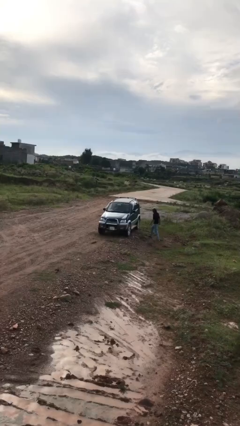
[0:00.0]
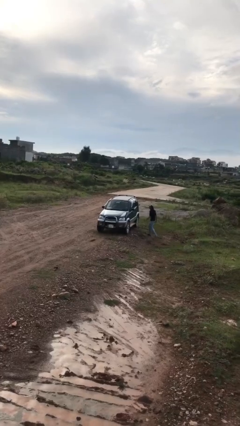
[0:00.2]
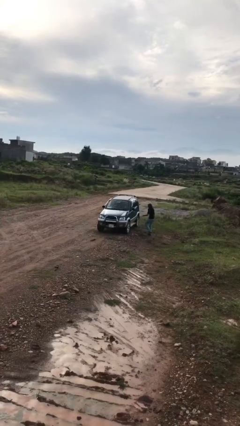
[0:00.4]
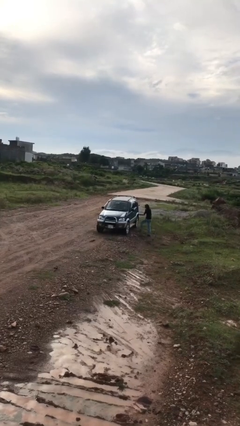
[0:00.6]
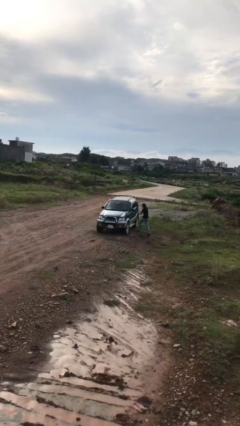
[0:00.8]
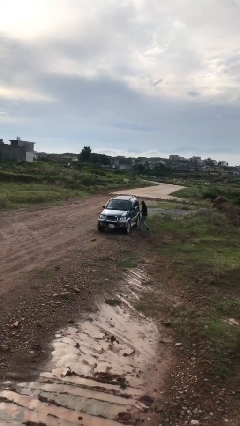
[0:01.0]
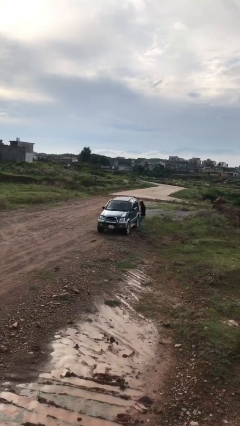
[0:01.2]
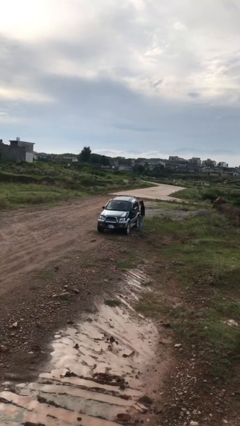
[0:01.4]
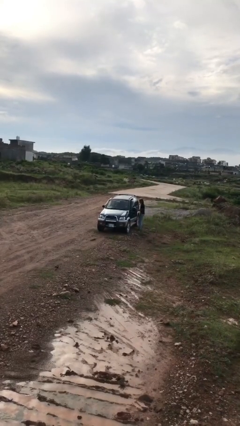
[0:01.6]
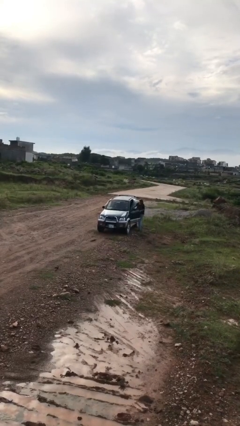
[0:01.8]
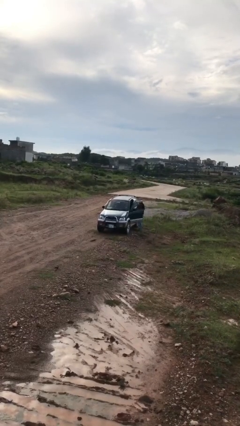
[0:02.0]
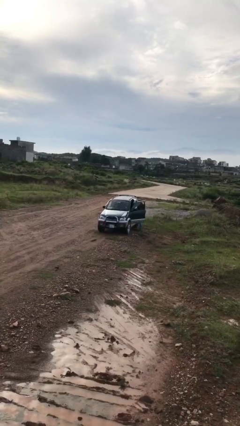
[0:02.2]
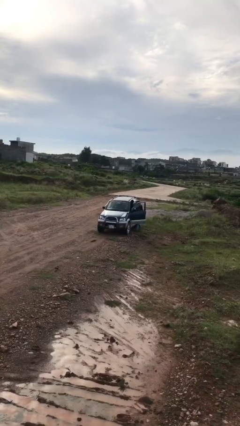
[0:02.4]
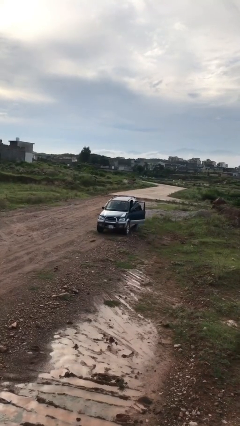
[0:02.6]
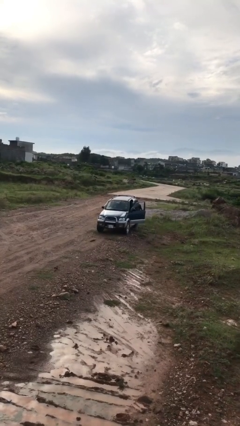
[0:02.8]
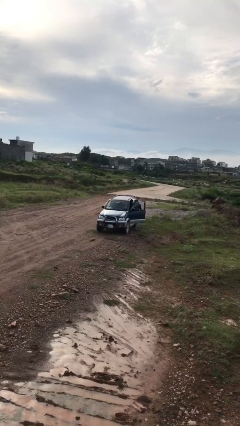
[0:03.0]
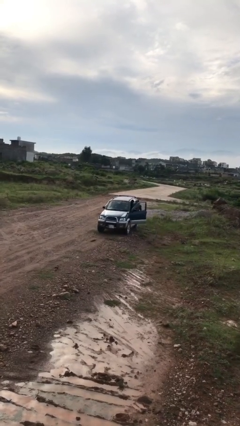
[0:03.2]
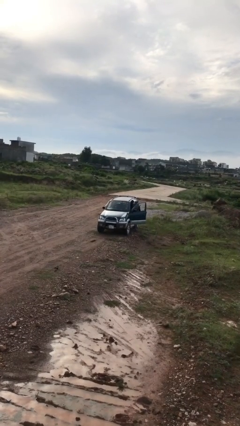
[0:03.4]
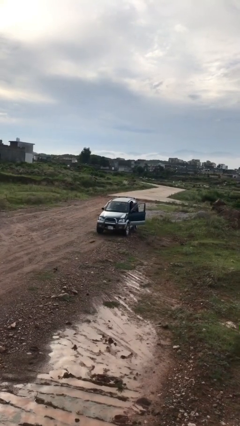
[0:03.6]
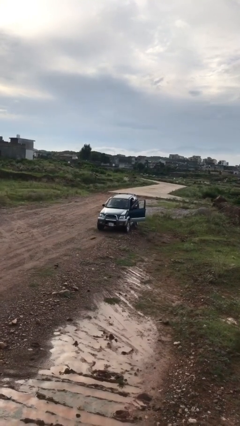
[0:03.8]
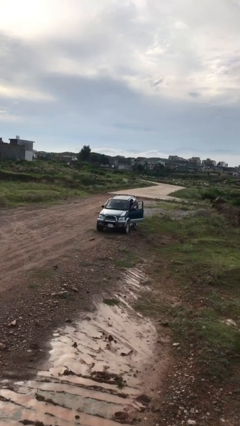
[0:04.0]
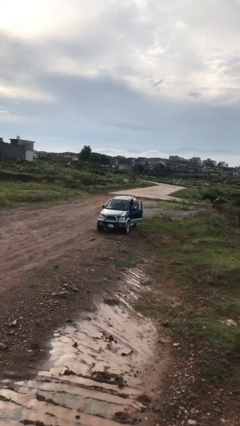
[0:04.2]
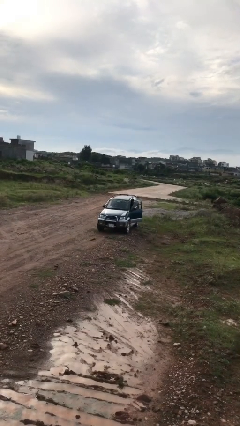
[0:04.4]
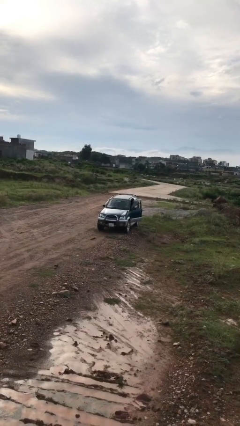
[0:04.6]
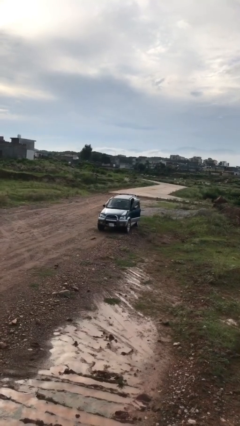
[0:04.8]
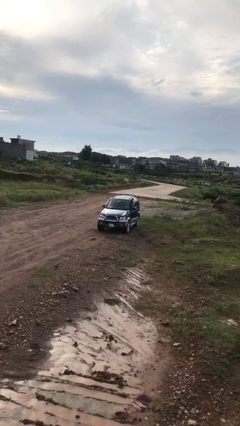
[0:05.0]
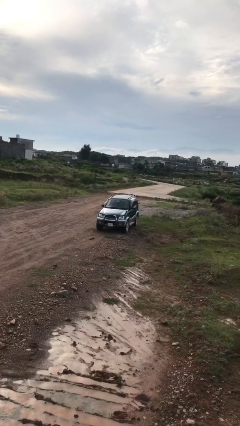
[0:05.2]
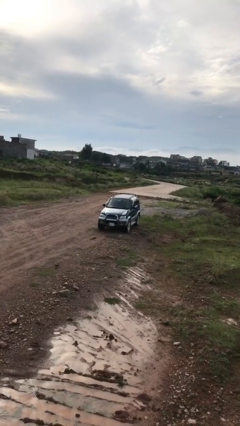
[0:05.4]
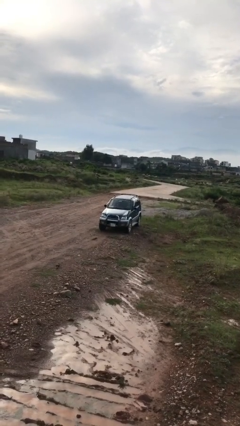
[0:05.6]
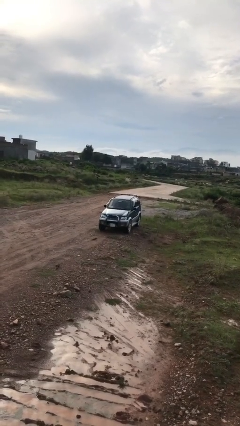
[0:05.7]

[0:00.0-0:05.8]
car picks up person

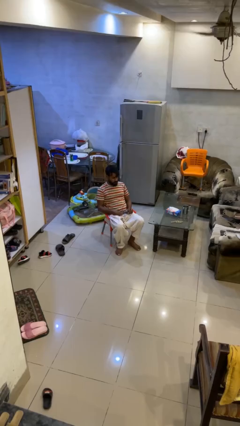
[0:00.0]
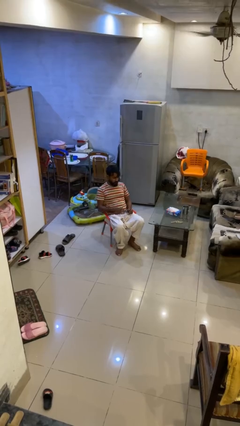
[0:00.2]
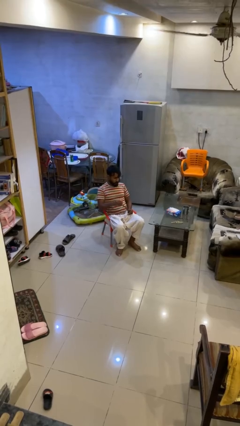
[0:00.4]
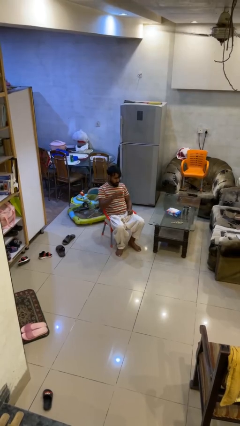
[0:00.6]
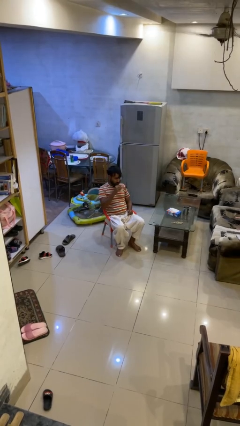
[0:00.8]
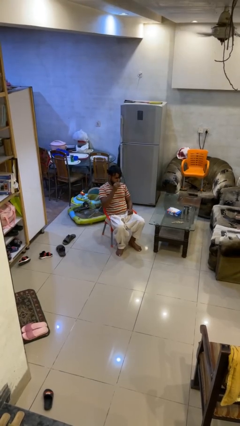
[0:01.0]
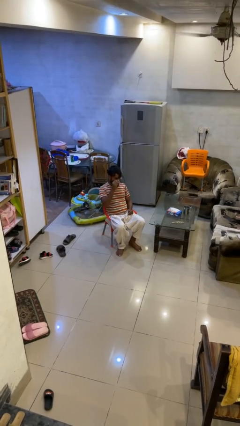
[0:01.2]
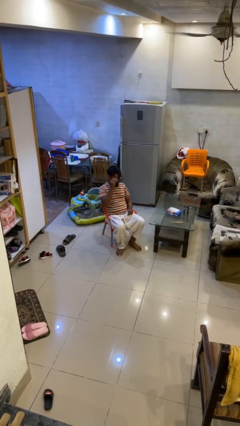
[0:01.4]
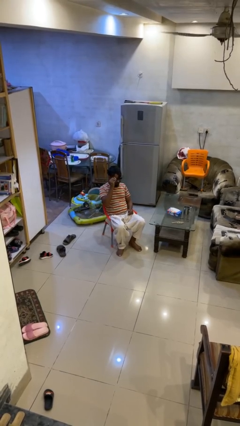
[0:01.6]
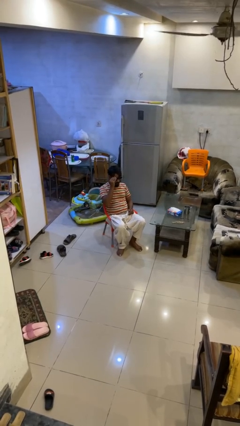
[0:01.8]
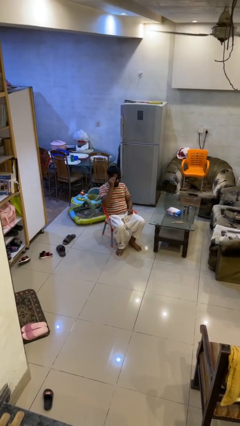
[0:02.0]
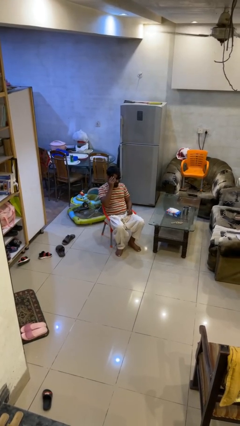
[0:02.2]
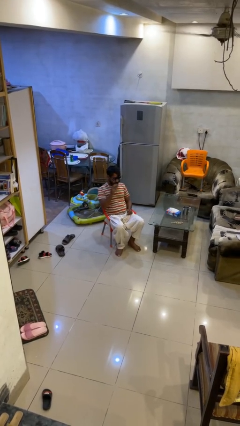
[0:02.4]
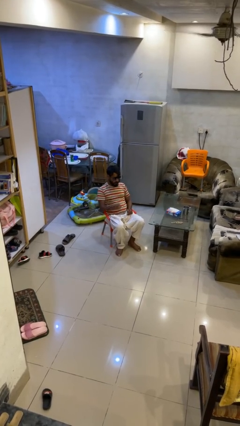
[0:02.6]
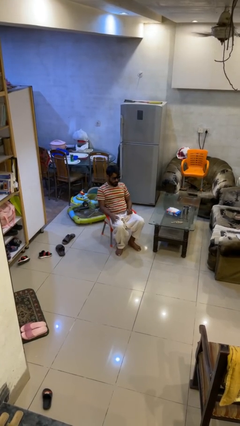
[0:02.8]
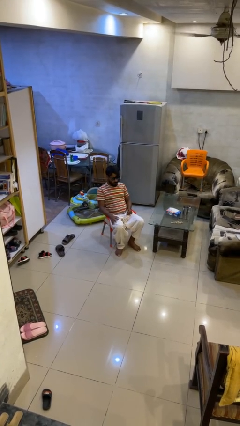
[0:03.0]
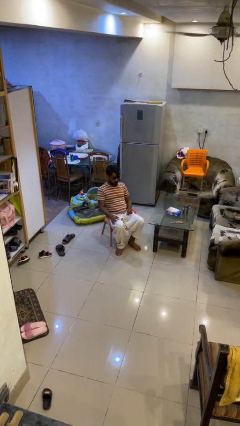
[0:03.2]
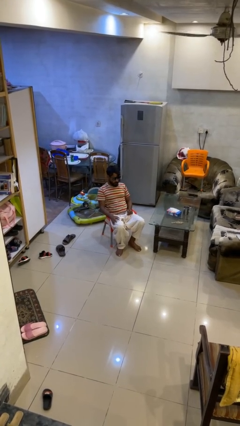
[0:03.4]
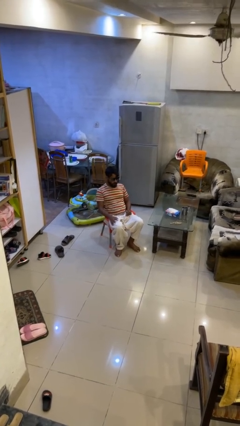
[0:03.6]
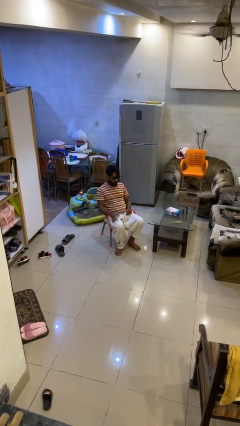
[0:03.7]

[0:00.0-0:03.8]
person puts on sunglasses

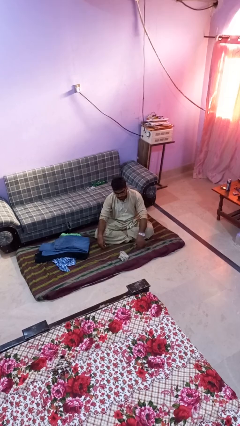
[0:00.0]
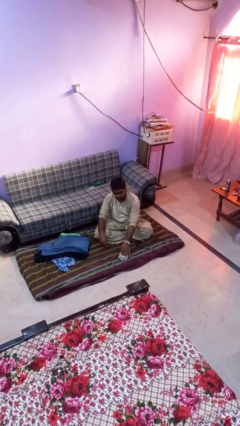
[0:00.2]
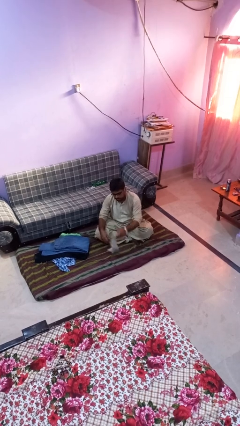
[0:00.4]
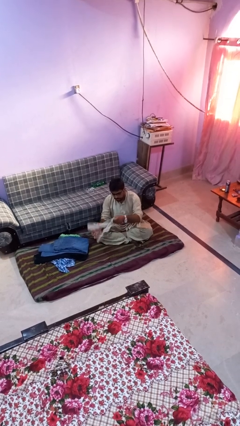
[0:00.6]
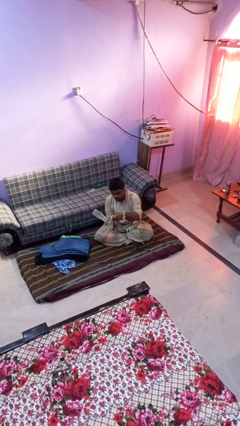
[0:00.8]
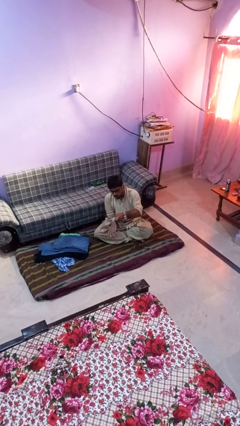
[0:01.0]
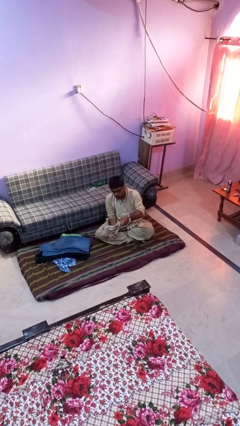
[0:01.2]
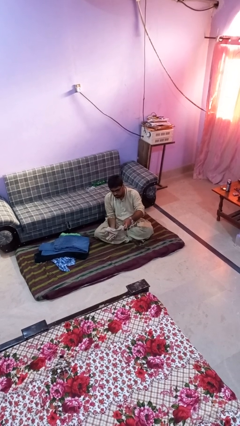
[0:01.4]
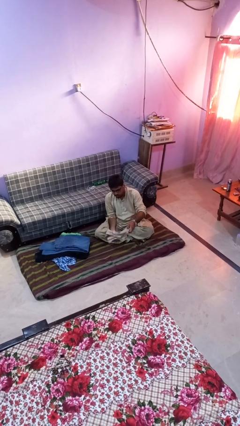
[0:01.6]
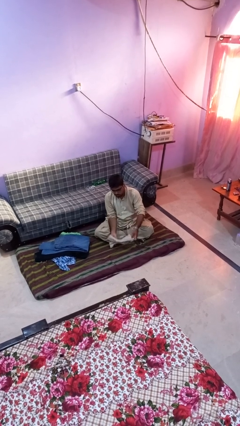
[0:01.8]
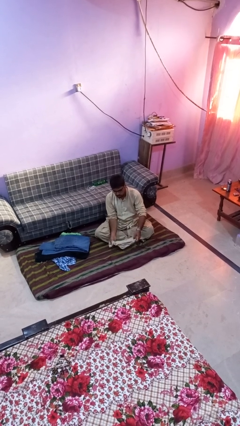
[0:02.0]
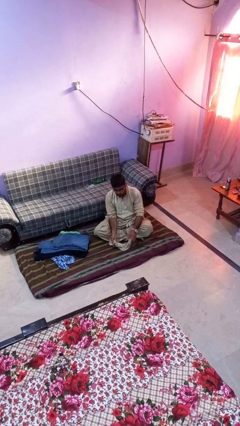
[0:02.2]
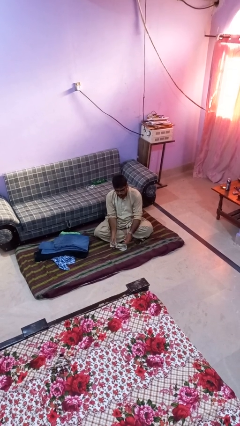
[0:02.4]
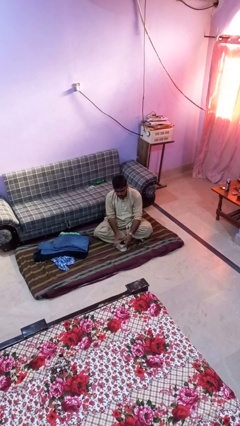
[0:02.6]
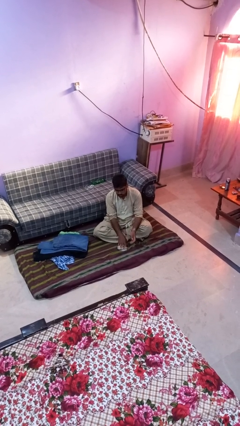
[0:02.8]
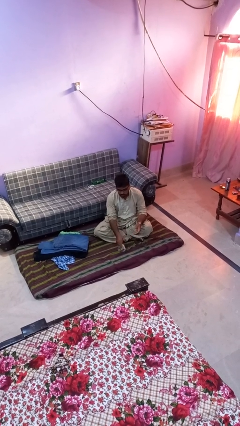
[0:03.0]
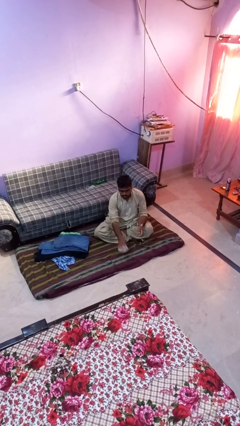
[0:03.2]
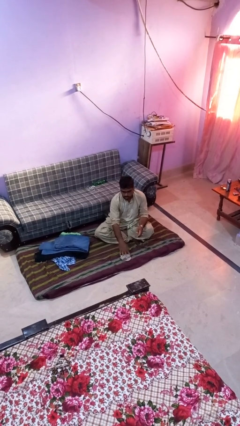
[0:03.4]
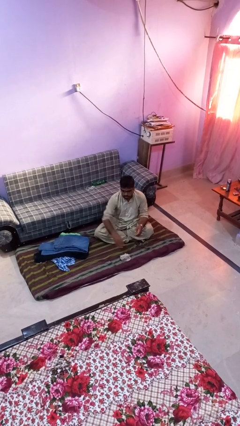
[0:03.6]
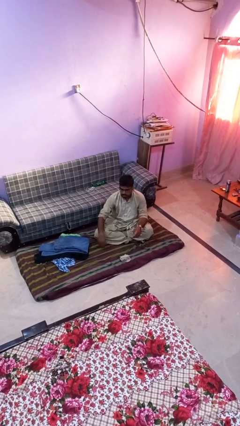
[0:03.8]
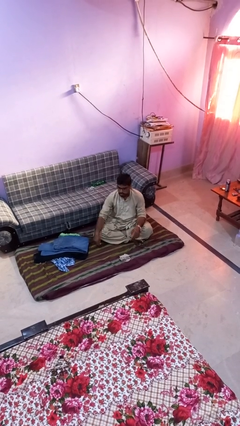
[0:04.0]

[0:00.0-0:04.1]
person folds socks

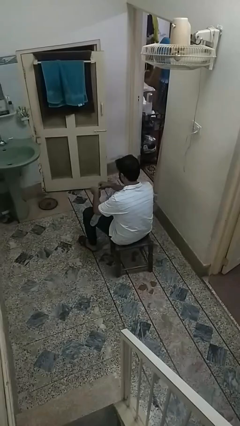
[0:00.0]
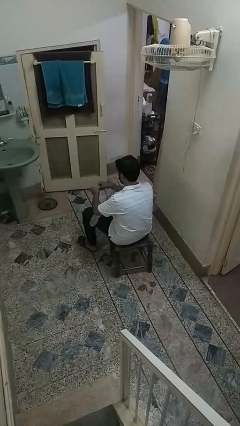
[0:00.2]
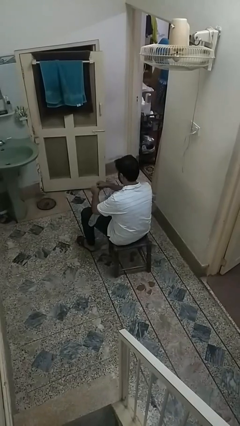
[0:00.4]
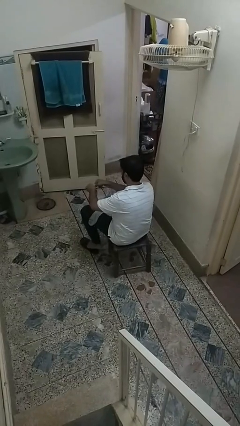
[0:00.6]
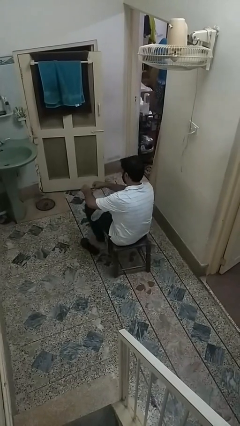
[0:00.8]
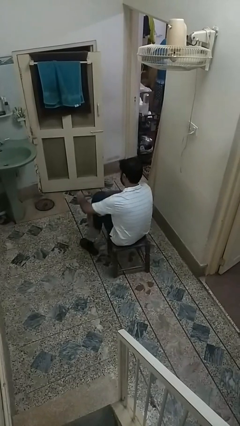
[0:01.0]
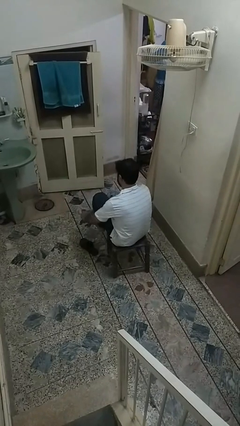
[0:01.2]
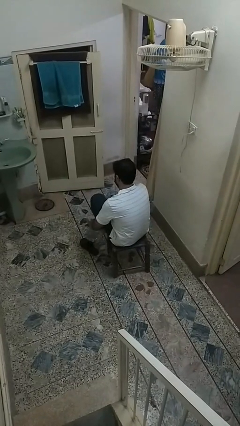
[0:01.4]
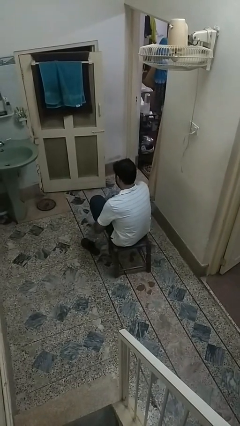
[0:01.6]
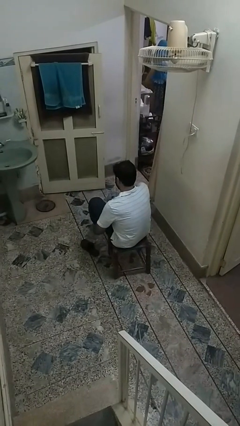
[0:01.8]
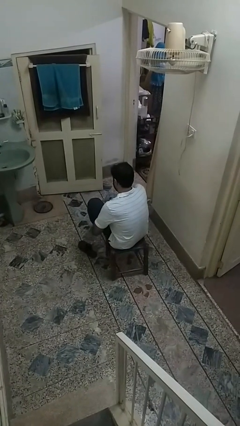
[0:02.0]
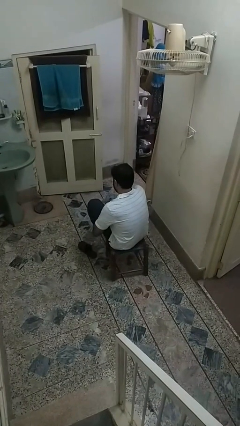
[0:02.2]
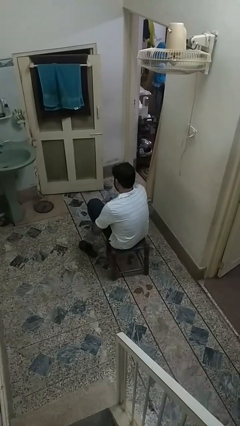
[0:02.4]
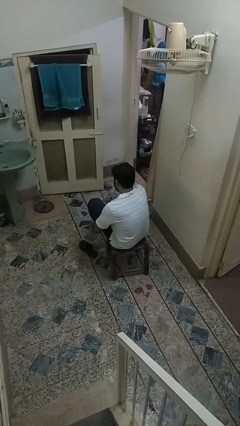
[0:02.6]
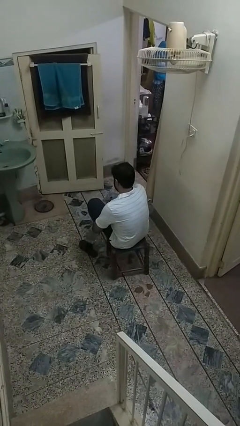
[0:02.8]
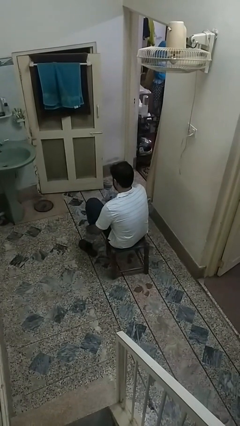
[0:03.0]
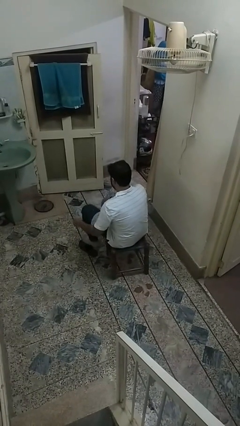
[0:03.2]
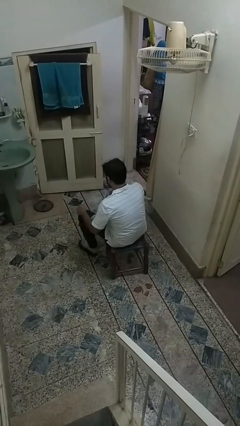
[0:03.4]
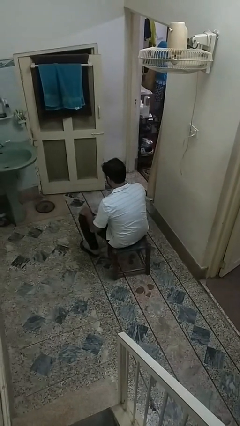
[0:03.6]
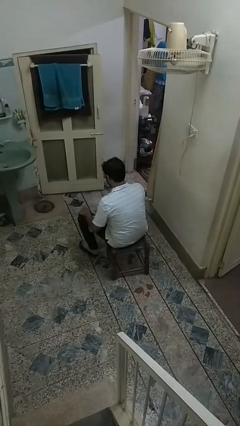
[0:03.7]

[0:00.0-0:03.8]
person puts on socks

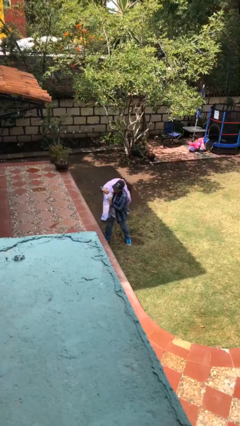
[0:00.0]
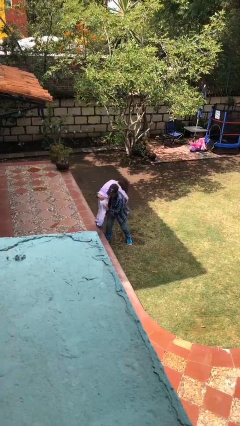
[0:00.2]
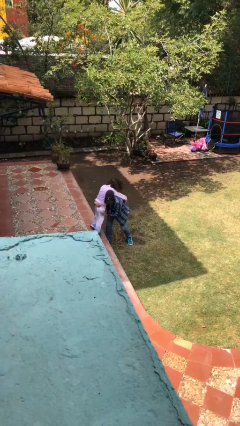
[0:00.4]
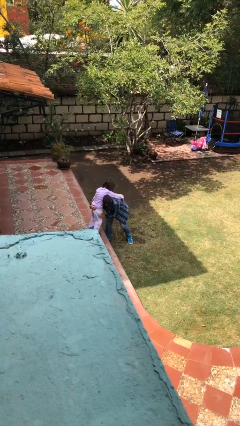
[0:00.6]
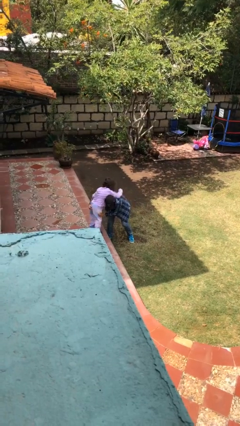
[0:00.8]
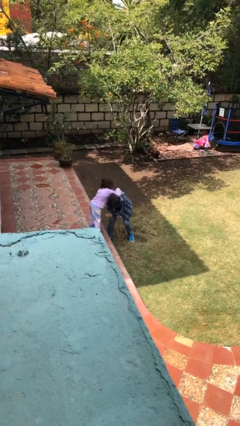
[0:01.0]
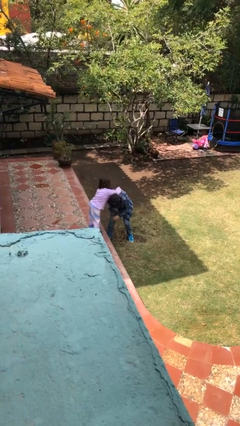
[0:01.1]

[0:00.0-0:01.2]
person puts down person
